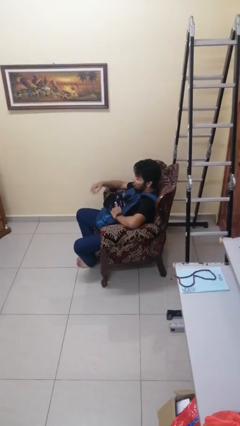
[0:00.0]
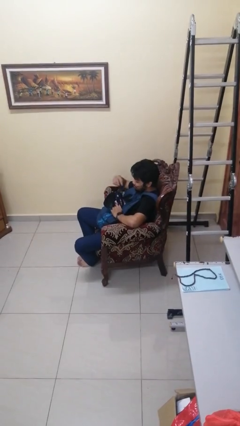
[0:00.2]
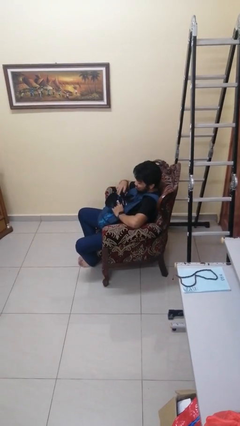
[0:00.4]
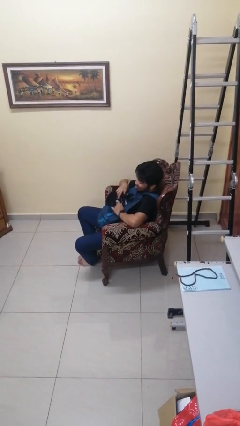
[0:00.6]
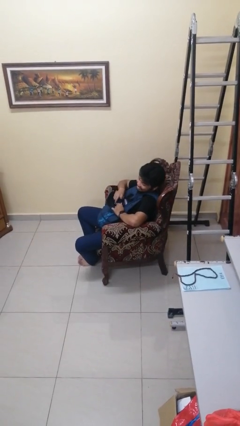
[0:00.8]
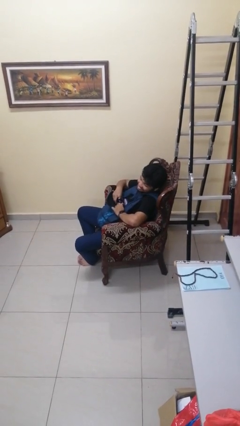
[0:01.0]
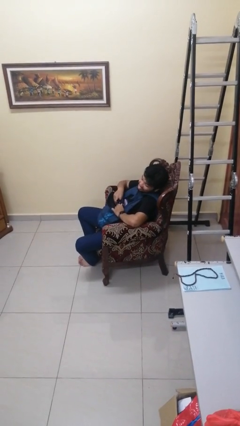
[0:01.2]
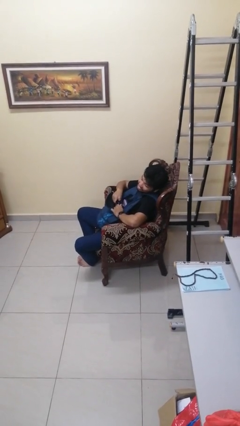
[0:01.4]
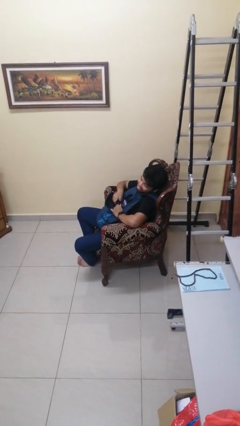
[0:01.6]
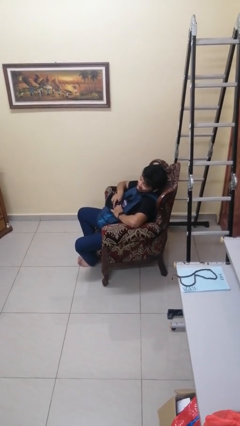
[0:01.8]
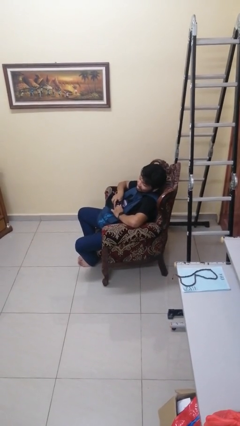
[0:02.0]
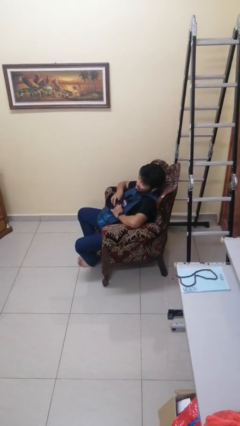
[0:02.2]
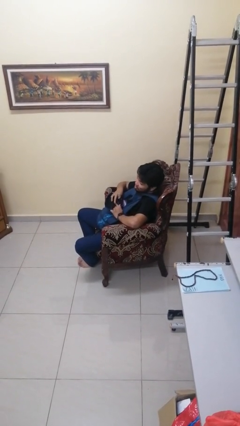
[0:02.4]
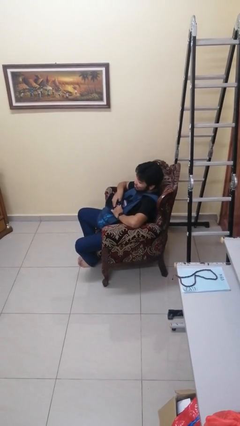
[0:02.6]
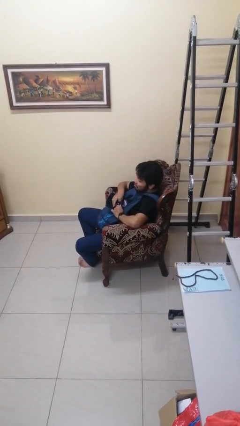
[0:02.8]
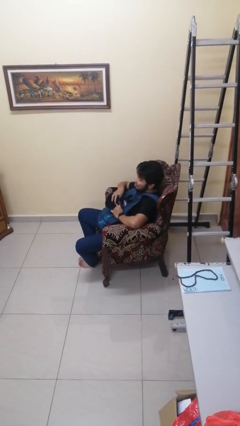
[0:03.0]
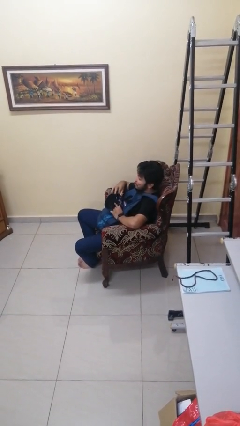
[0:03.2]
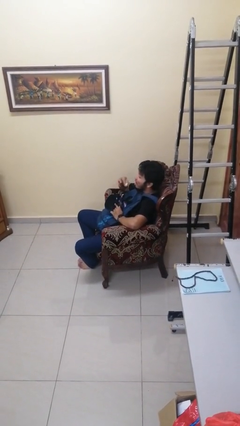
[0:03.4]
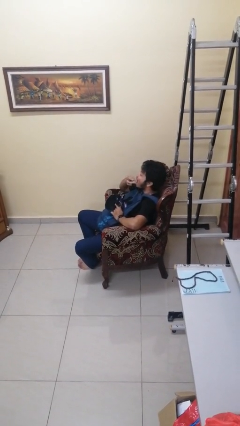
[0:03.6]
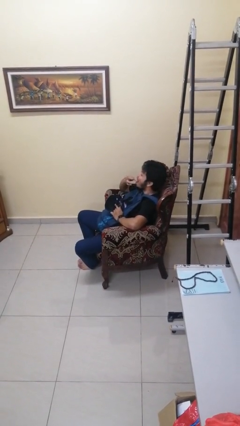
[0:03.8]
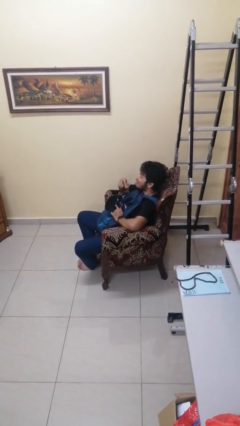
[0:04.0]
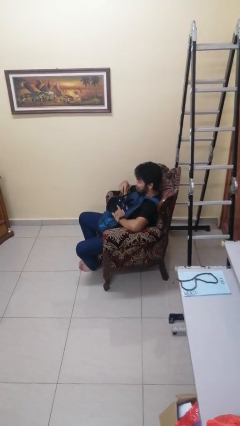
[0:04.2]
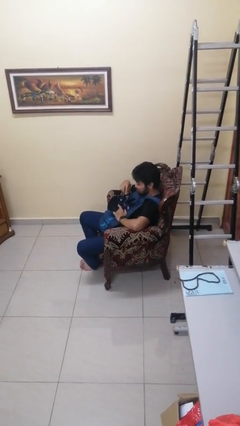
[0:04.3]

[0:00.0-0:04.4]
person eats snack from bag

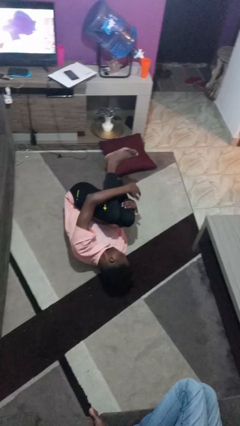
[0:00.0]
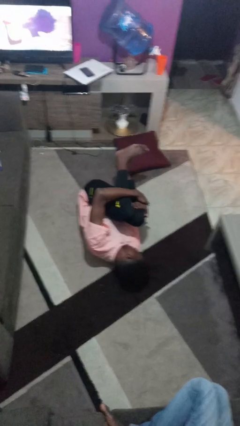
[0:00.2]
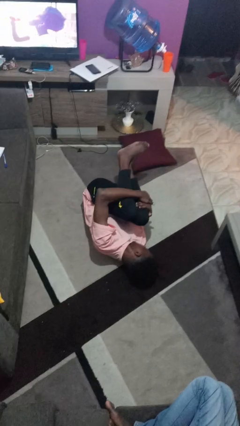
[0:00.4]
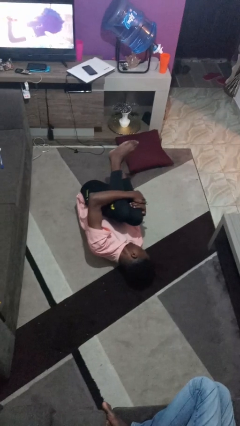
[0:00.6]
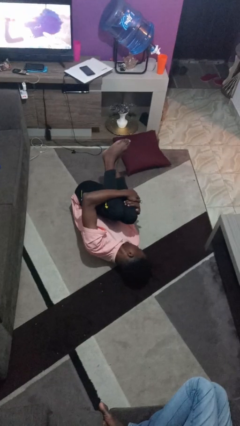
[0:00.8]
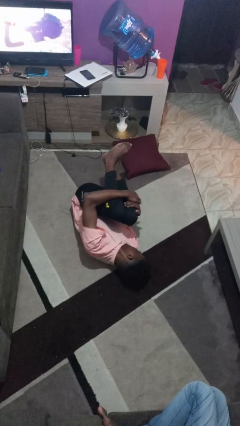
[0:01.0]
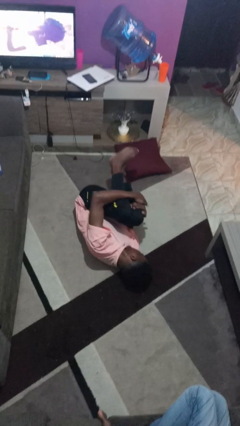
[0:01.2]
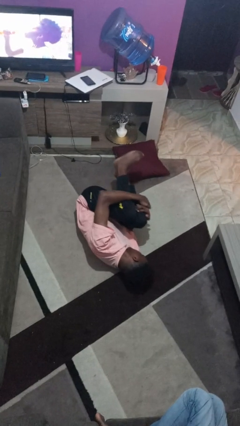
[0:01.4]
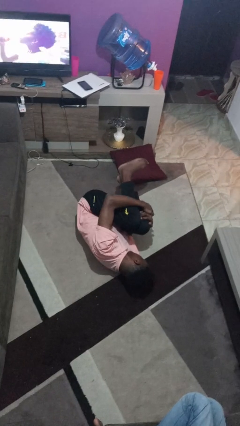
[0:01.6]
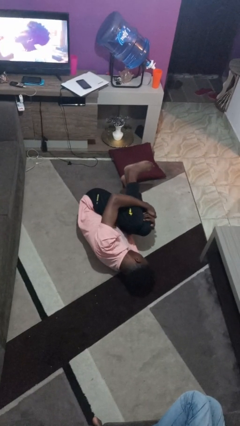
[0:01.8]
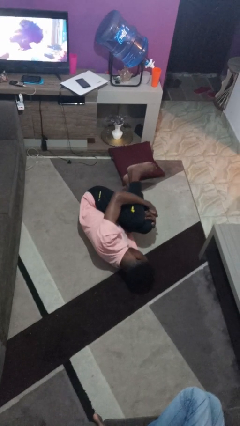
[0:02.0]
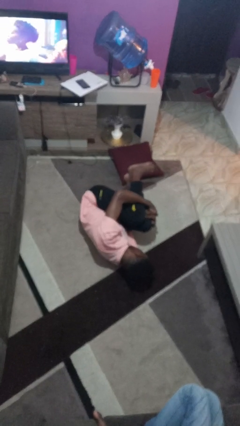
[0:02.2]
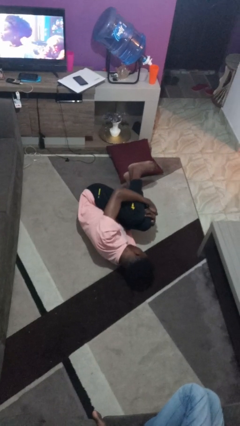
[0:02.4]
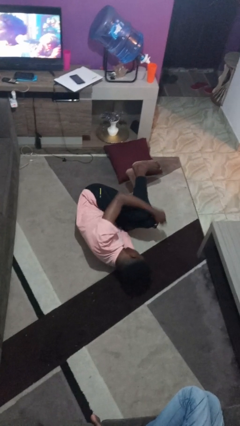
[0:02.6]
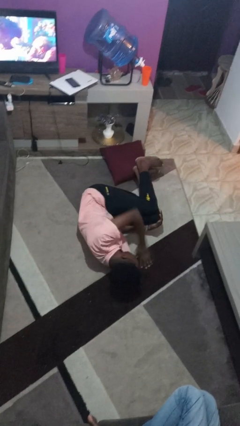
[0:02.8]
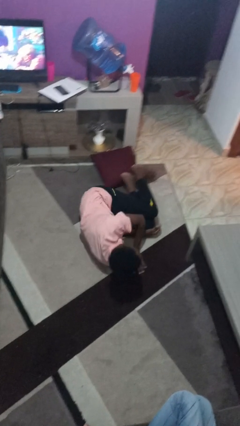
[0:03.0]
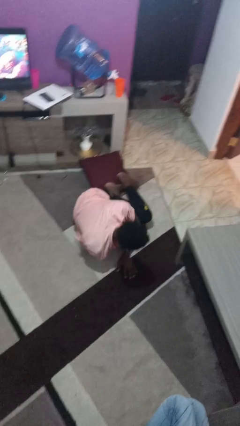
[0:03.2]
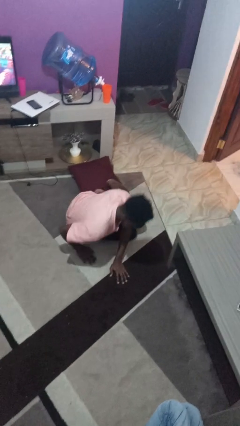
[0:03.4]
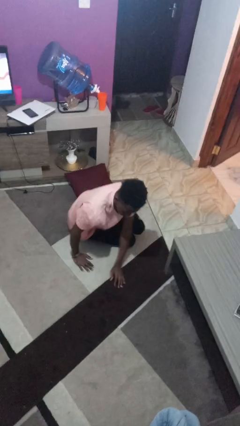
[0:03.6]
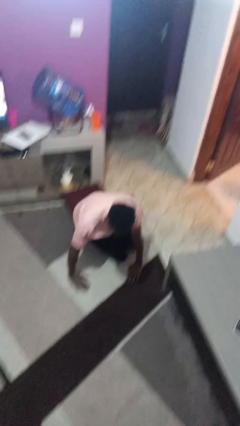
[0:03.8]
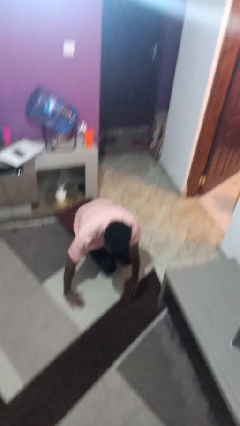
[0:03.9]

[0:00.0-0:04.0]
person lies down on floor

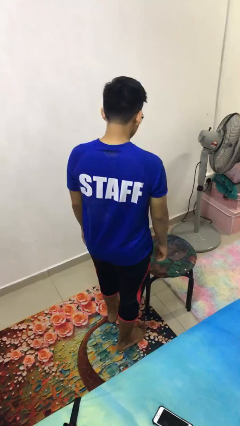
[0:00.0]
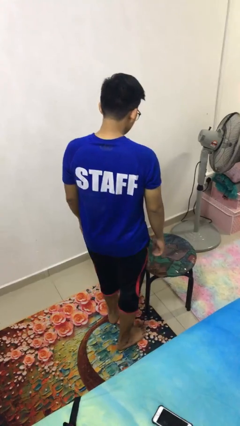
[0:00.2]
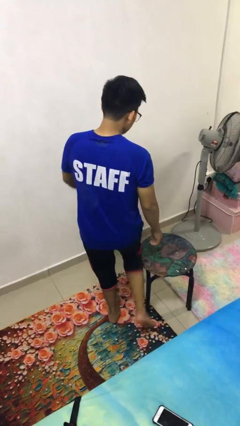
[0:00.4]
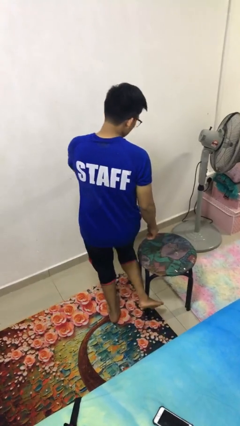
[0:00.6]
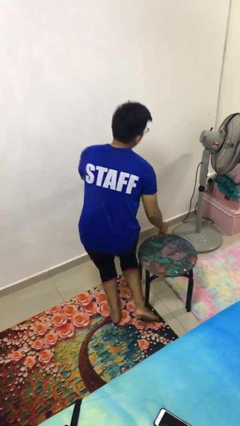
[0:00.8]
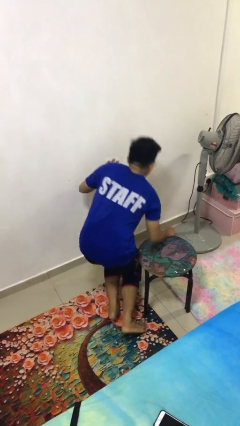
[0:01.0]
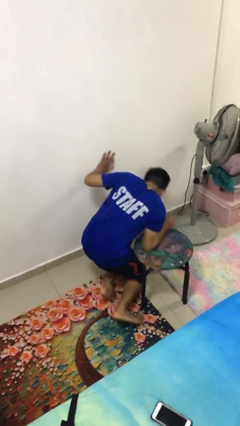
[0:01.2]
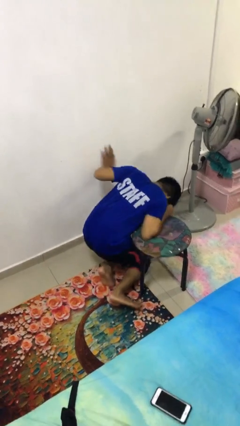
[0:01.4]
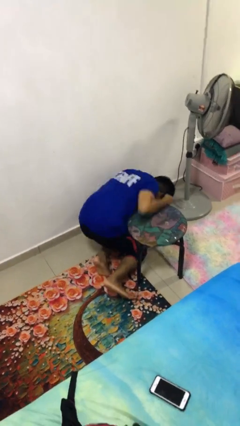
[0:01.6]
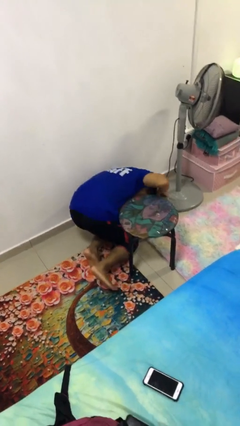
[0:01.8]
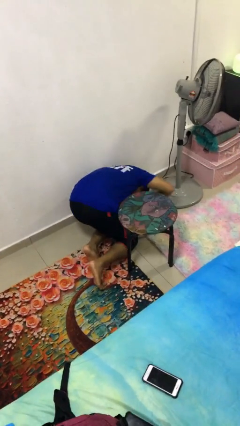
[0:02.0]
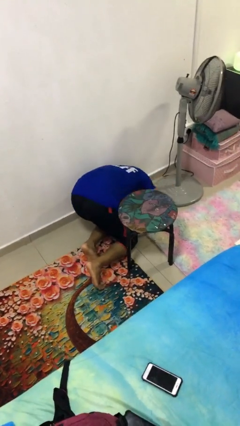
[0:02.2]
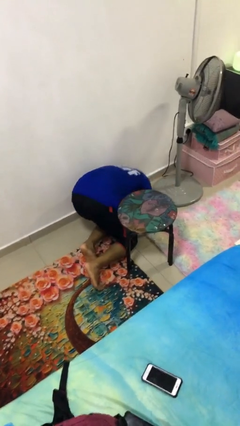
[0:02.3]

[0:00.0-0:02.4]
person trips on object on floor

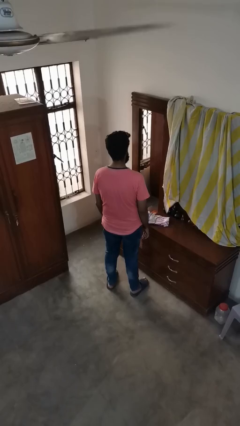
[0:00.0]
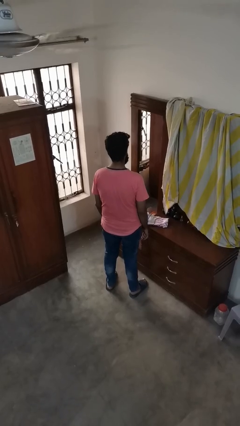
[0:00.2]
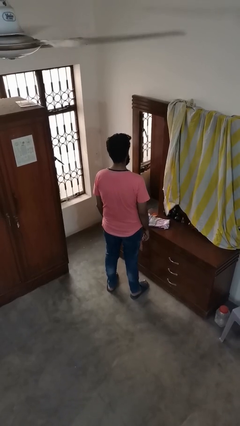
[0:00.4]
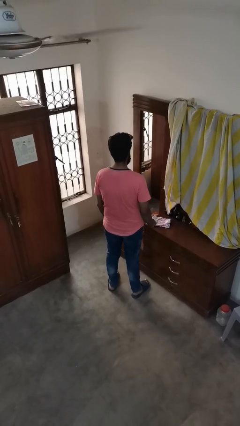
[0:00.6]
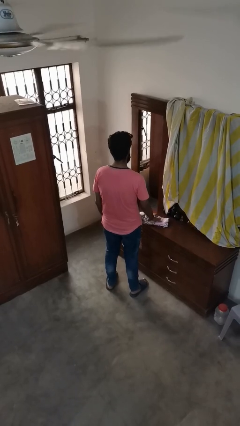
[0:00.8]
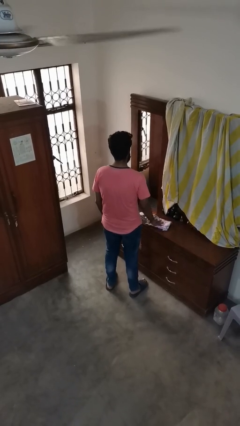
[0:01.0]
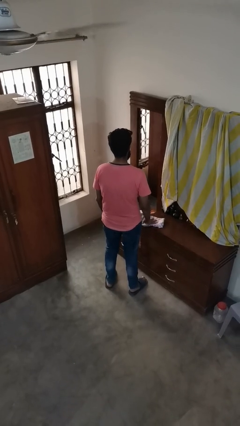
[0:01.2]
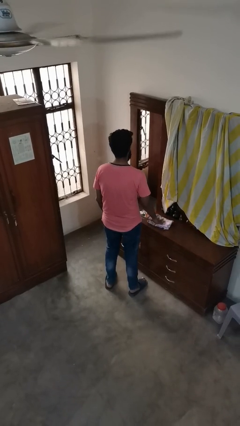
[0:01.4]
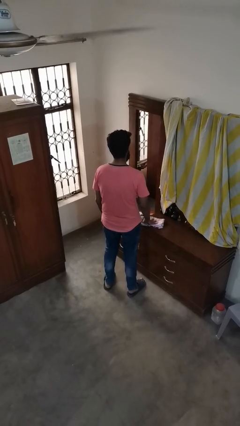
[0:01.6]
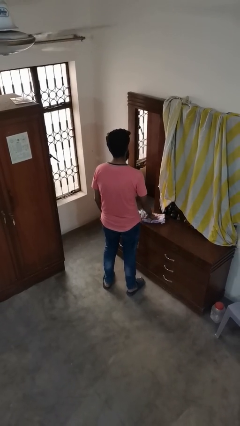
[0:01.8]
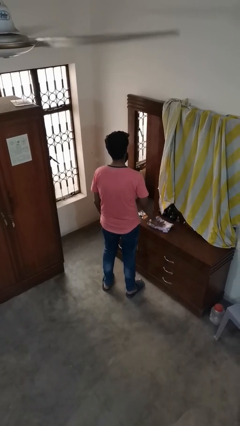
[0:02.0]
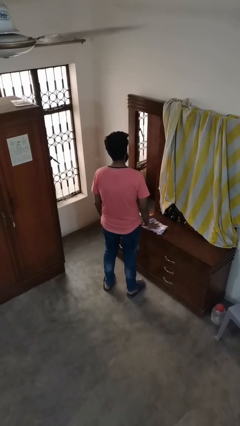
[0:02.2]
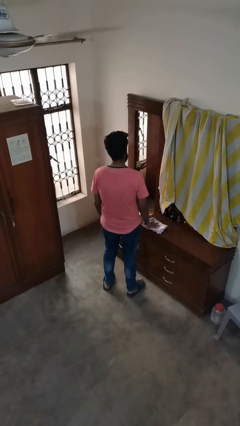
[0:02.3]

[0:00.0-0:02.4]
person cleans table with rag

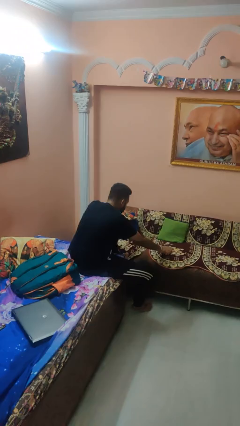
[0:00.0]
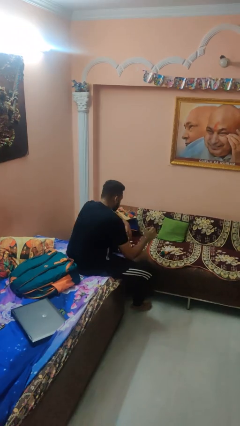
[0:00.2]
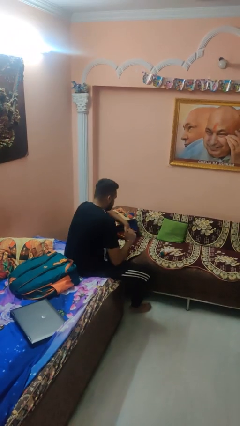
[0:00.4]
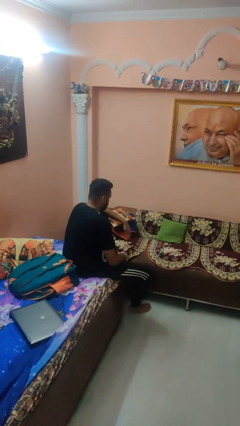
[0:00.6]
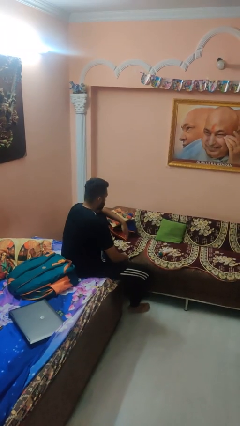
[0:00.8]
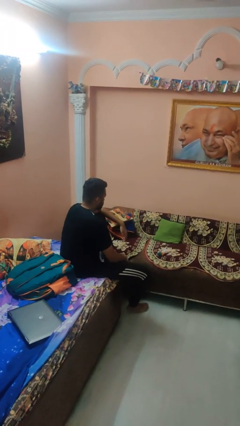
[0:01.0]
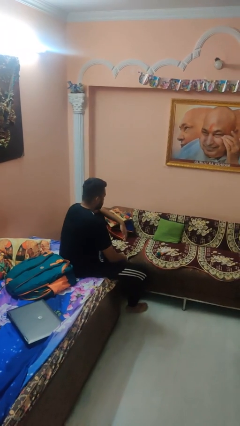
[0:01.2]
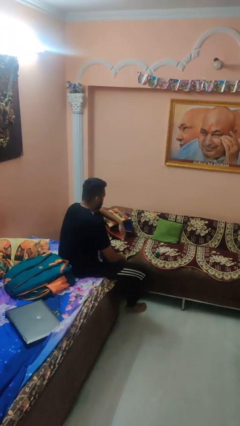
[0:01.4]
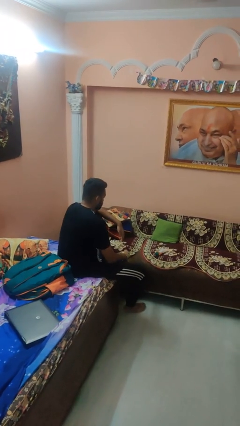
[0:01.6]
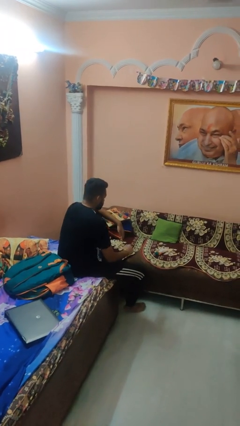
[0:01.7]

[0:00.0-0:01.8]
person puts down object on couch

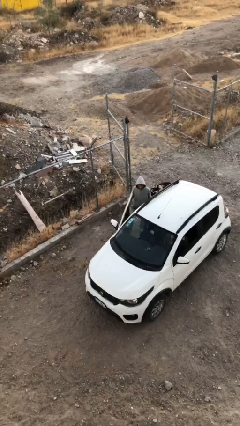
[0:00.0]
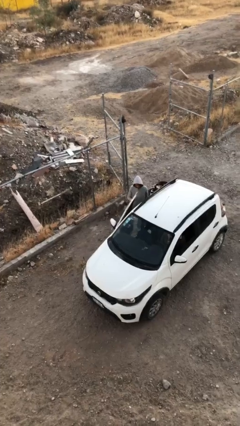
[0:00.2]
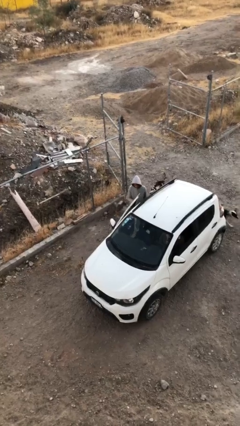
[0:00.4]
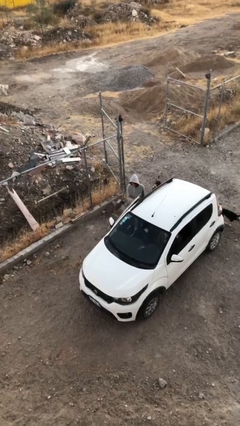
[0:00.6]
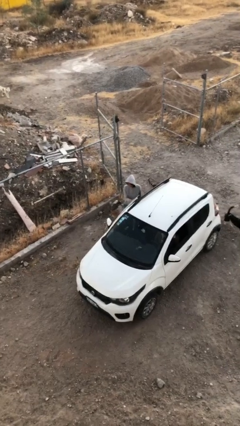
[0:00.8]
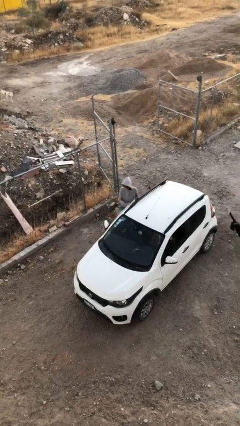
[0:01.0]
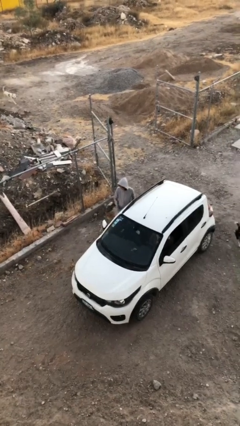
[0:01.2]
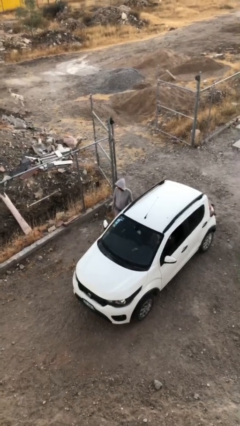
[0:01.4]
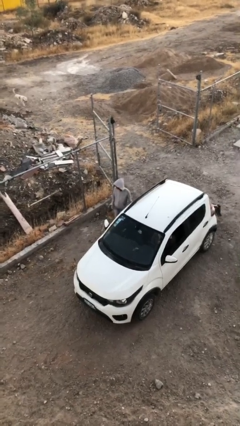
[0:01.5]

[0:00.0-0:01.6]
person closes car door

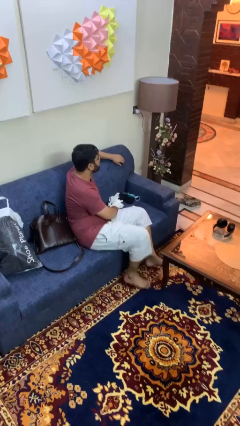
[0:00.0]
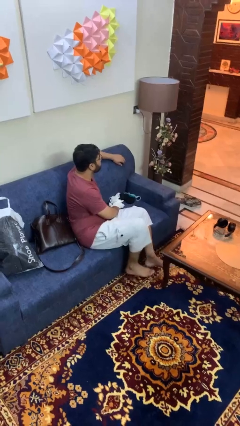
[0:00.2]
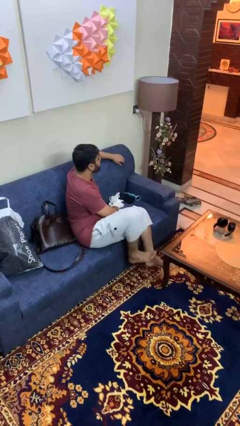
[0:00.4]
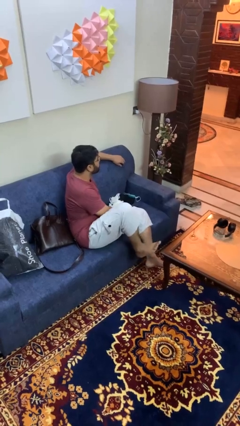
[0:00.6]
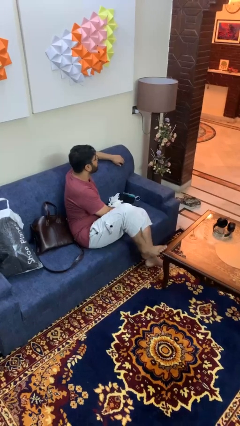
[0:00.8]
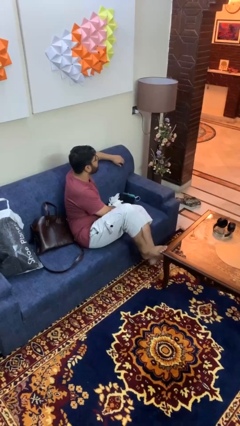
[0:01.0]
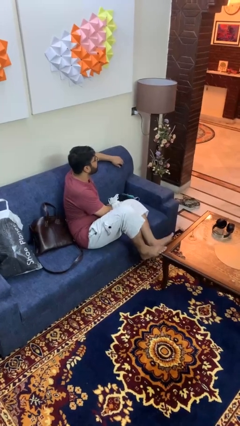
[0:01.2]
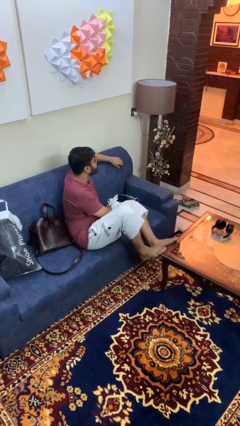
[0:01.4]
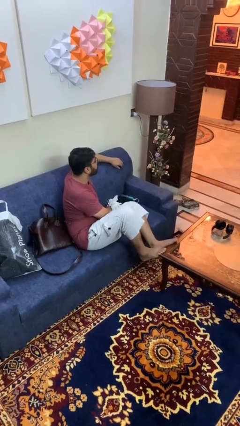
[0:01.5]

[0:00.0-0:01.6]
person puts feet up
